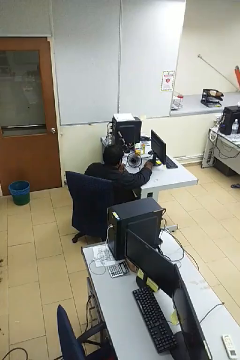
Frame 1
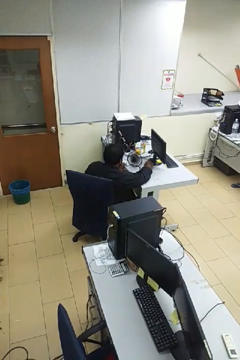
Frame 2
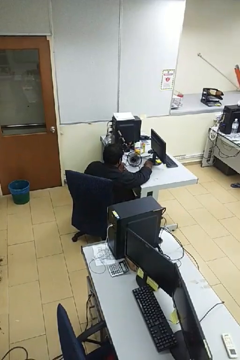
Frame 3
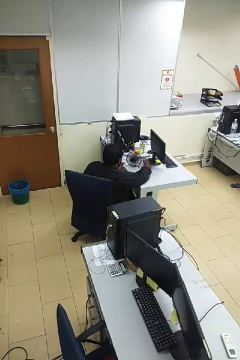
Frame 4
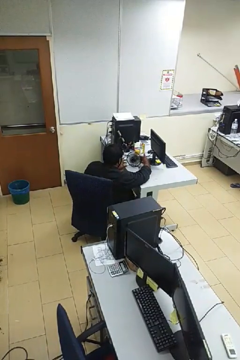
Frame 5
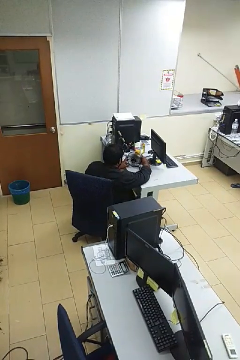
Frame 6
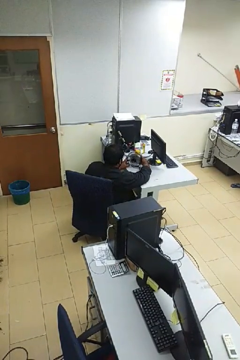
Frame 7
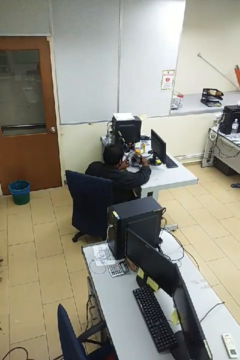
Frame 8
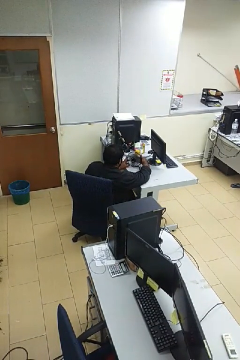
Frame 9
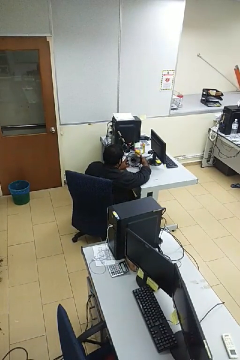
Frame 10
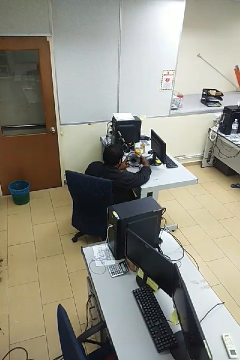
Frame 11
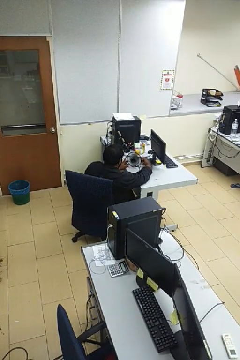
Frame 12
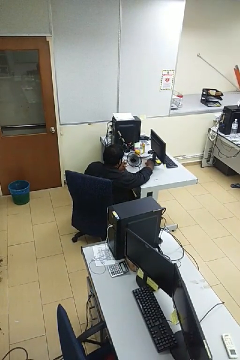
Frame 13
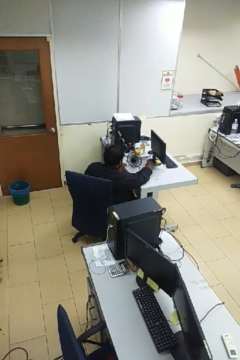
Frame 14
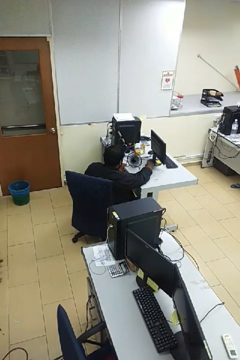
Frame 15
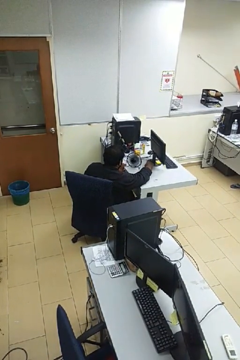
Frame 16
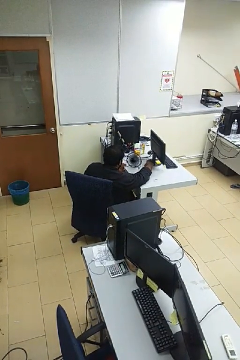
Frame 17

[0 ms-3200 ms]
person turns on fan

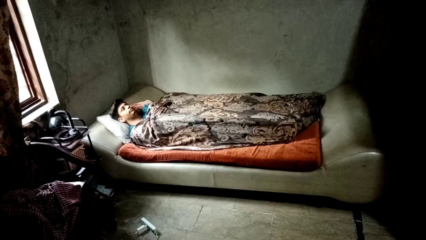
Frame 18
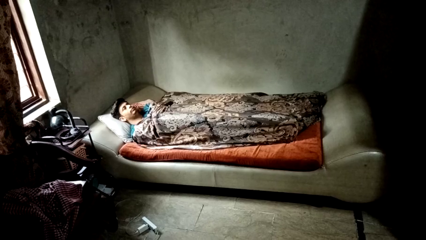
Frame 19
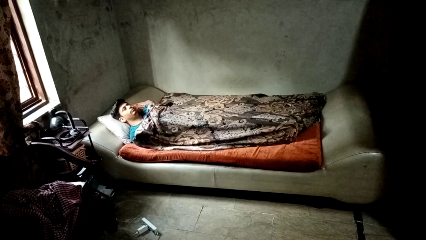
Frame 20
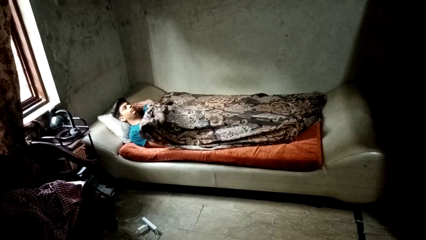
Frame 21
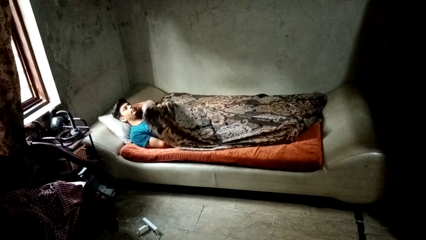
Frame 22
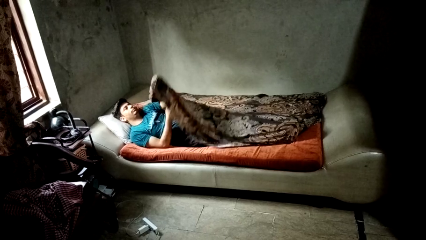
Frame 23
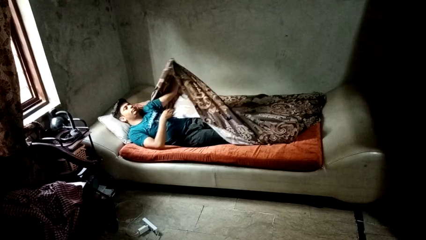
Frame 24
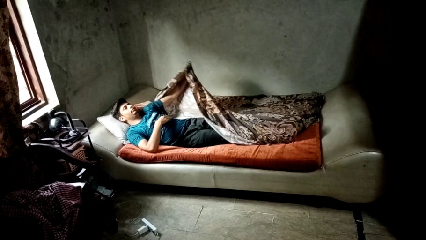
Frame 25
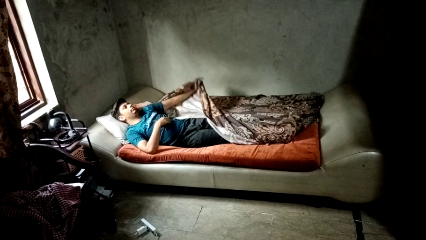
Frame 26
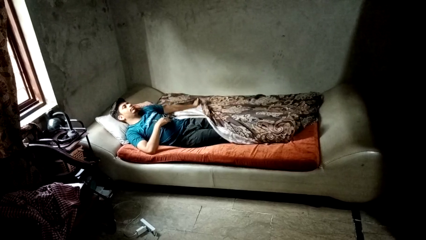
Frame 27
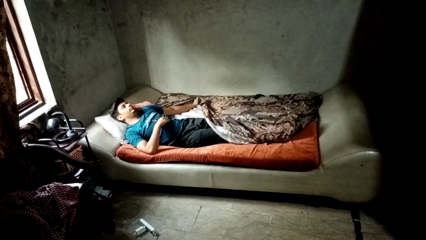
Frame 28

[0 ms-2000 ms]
person uncovers with bedsheets

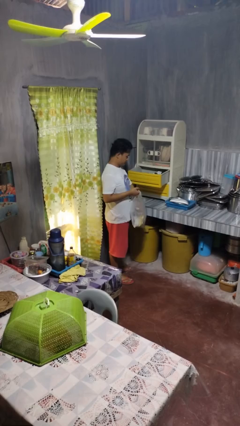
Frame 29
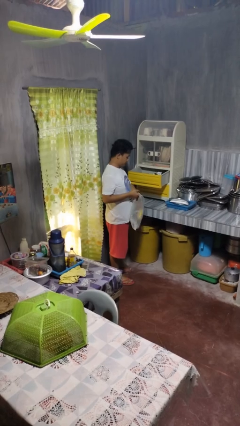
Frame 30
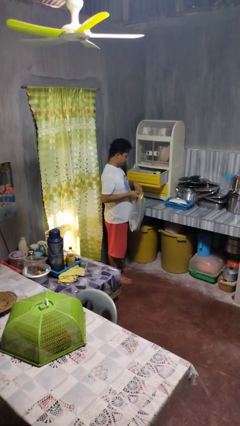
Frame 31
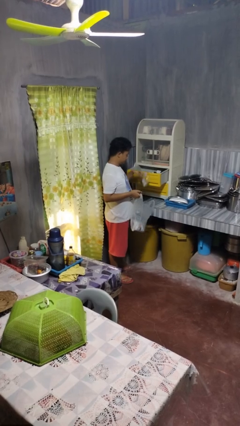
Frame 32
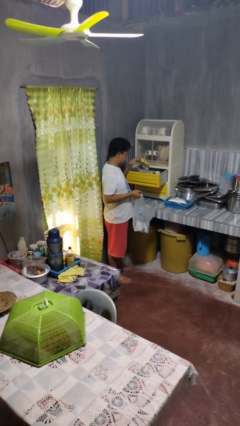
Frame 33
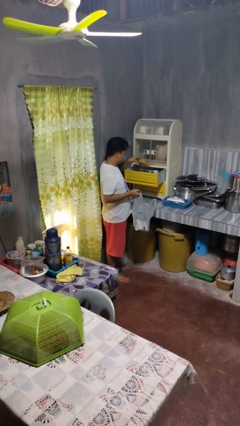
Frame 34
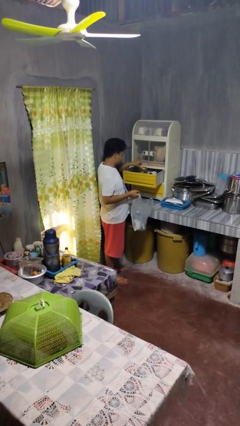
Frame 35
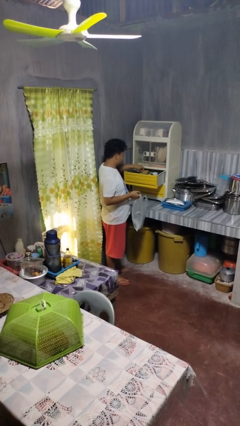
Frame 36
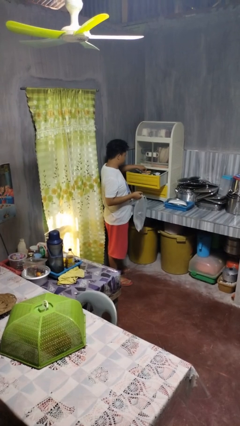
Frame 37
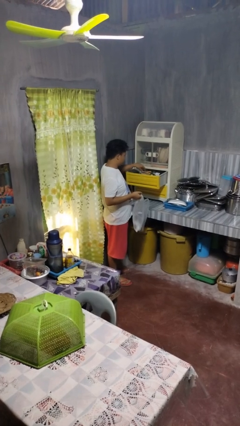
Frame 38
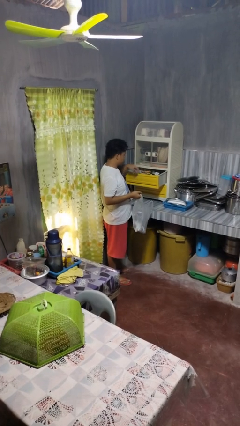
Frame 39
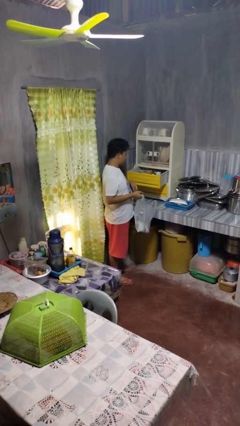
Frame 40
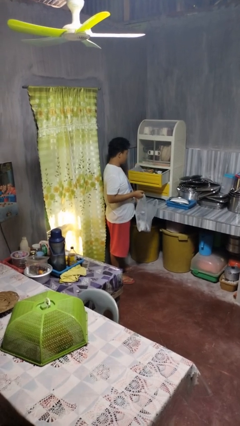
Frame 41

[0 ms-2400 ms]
person loads groceries into cabinet

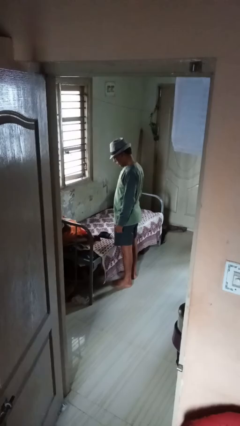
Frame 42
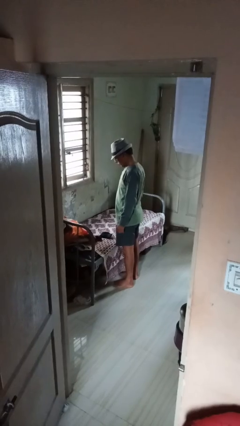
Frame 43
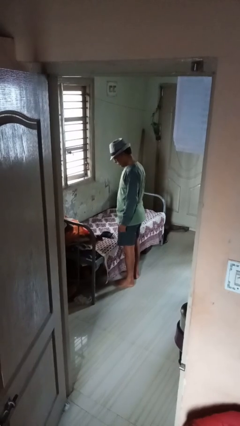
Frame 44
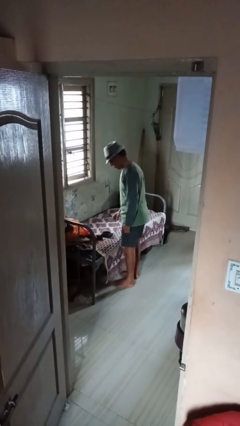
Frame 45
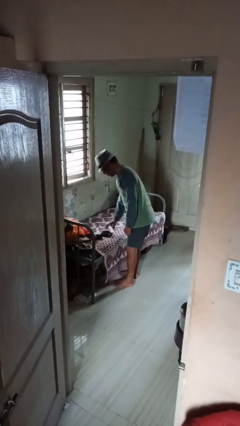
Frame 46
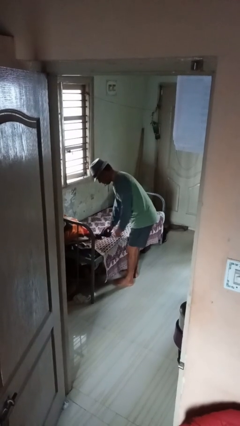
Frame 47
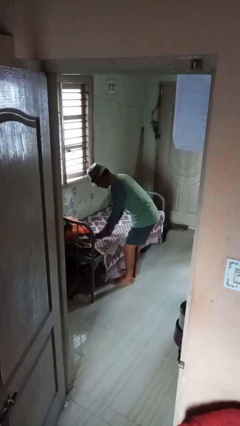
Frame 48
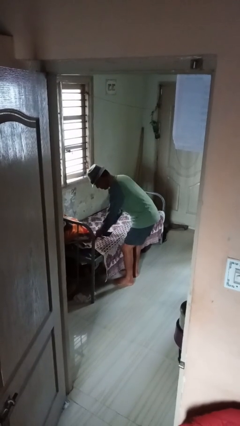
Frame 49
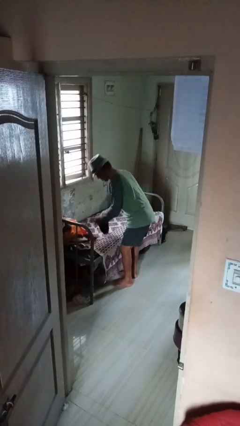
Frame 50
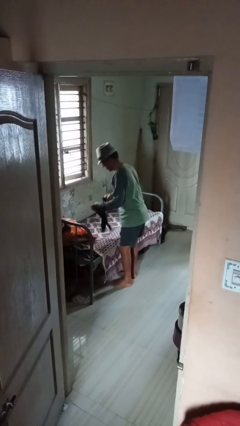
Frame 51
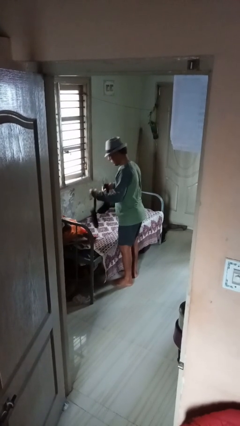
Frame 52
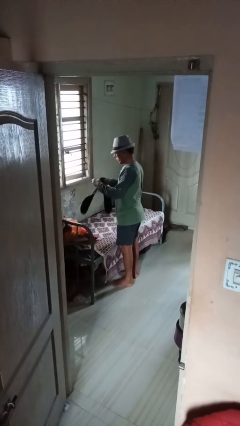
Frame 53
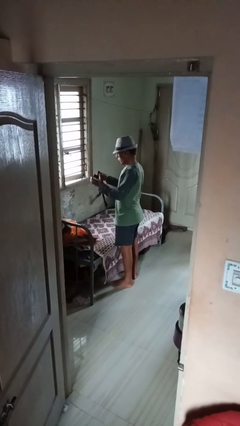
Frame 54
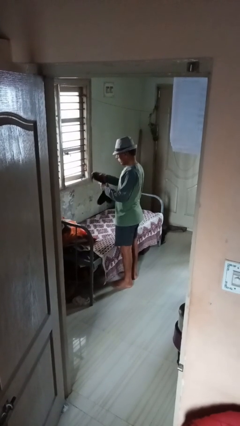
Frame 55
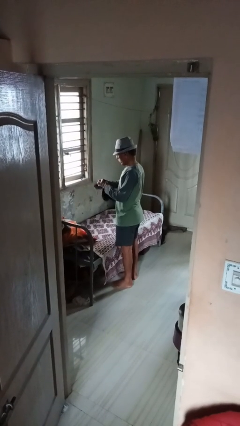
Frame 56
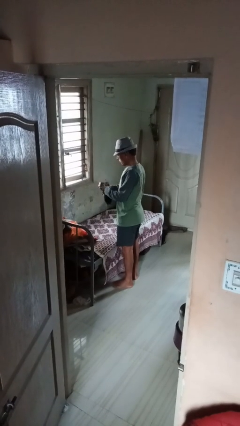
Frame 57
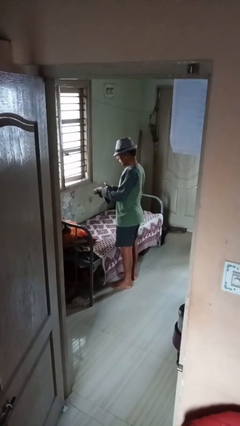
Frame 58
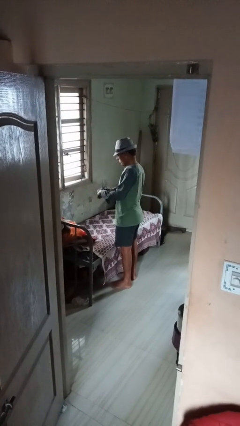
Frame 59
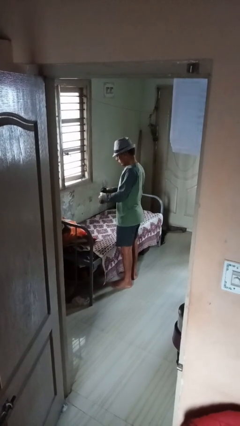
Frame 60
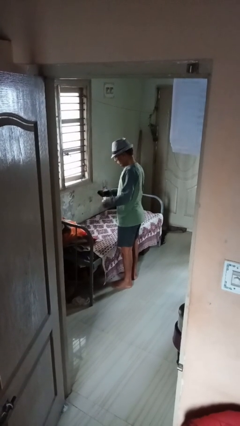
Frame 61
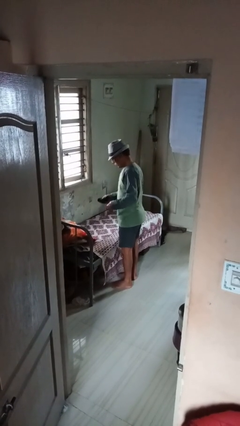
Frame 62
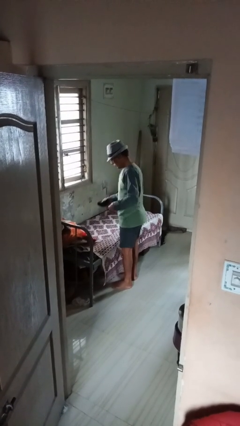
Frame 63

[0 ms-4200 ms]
person folds socks

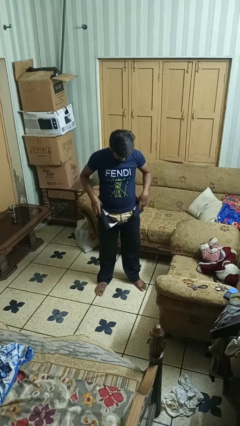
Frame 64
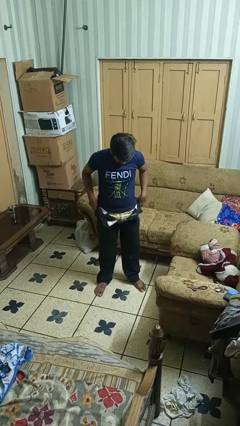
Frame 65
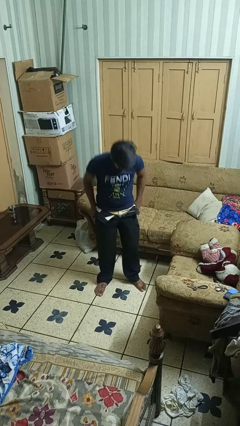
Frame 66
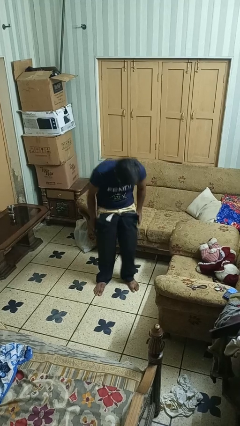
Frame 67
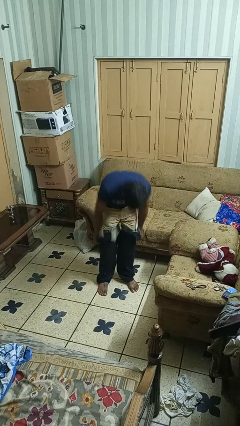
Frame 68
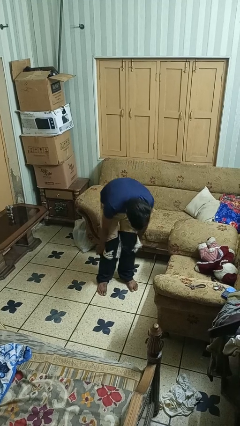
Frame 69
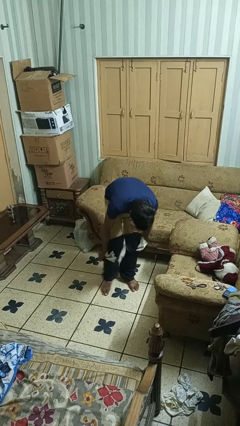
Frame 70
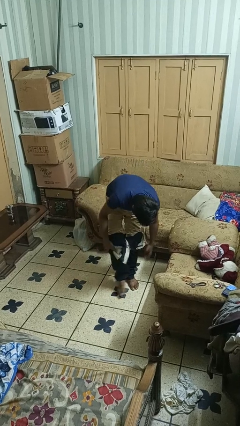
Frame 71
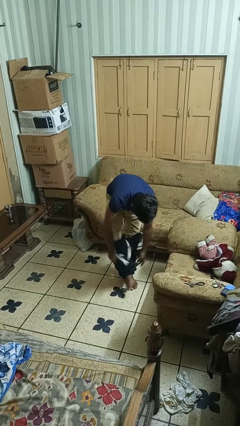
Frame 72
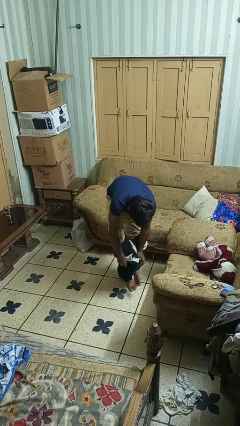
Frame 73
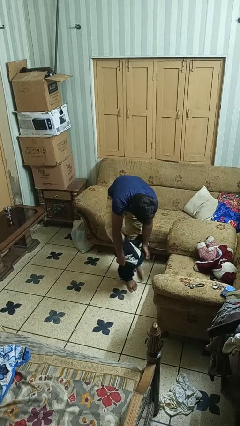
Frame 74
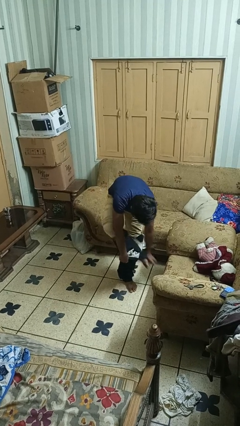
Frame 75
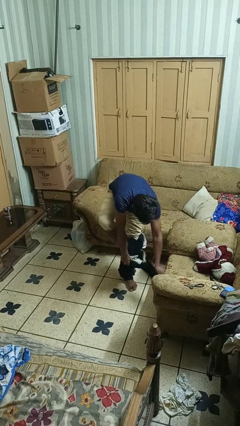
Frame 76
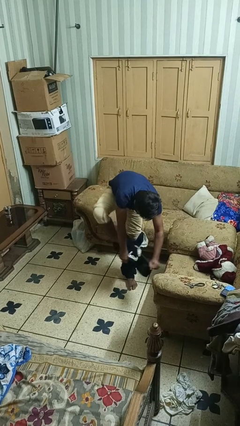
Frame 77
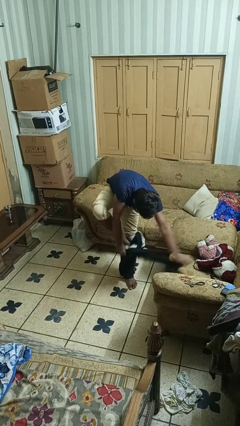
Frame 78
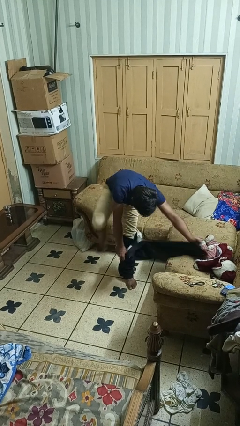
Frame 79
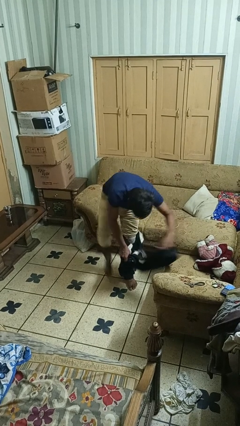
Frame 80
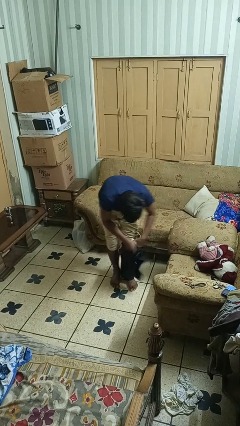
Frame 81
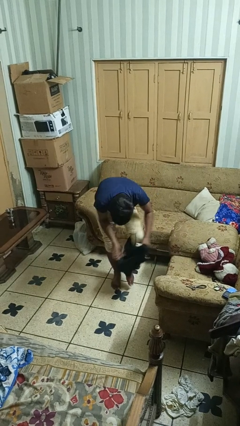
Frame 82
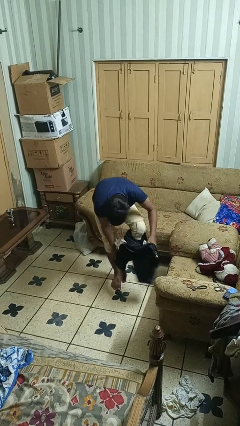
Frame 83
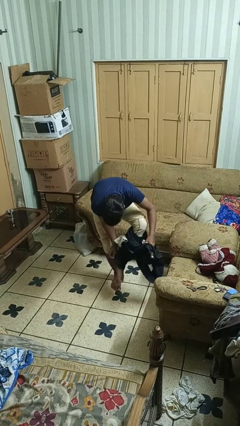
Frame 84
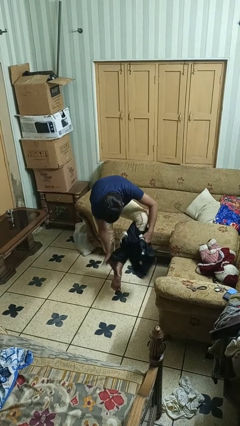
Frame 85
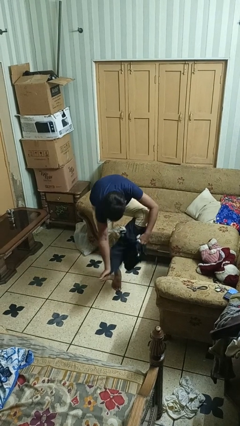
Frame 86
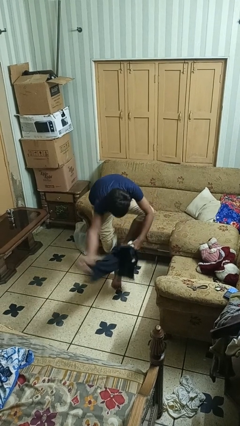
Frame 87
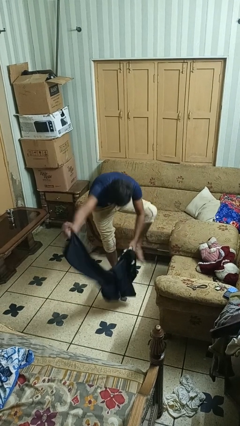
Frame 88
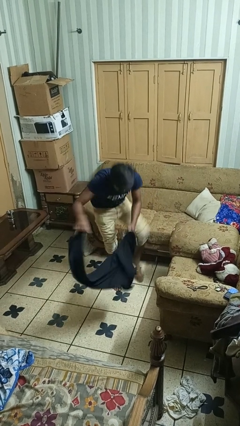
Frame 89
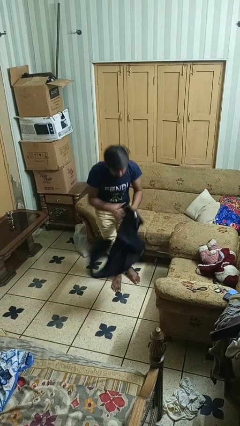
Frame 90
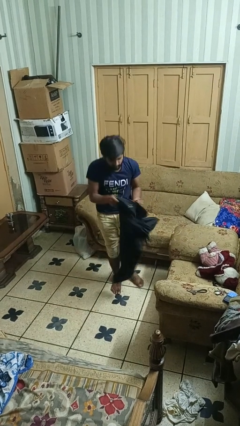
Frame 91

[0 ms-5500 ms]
person takes off pants

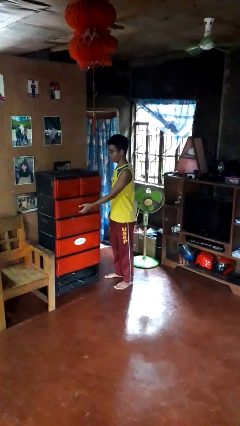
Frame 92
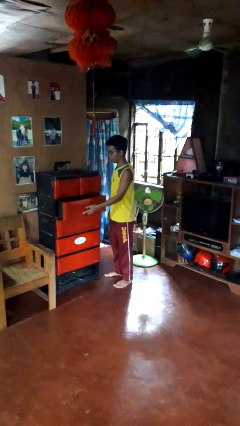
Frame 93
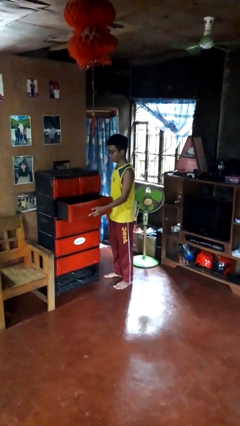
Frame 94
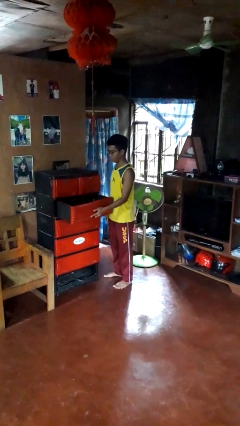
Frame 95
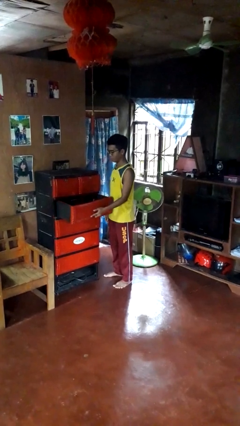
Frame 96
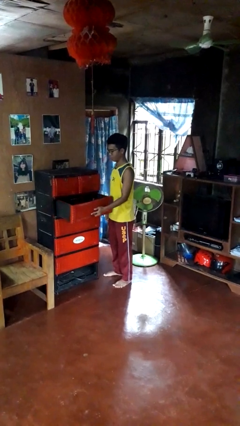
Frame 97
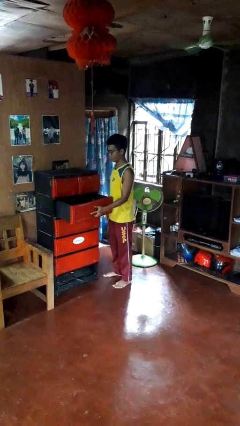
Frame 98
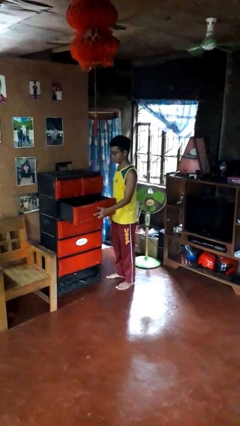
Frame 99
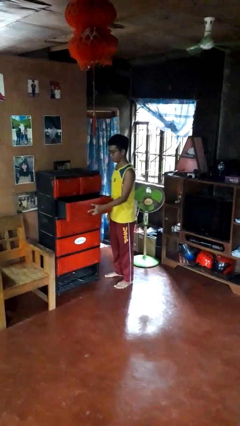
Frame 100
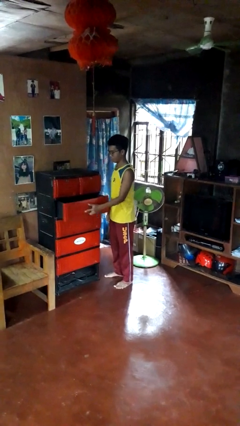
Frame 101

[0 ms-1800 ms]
person opens dresser drawer
